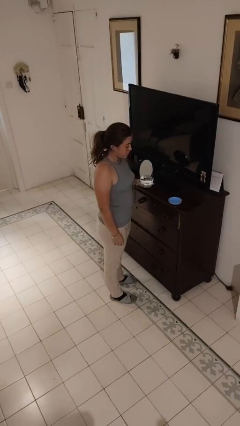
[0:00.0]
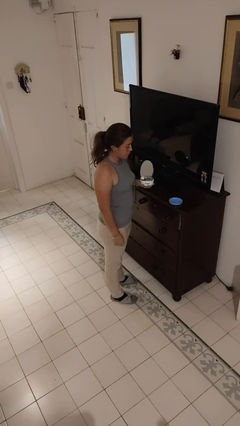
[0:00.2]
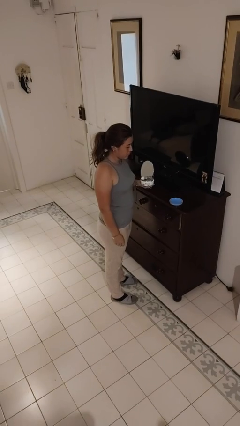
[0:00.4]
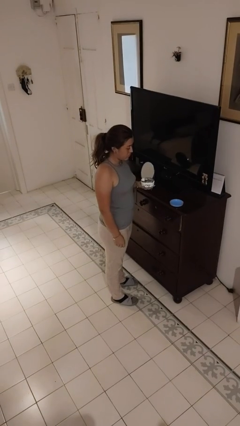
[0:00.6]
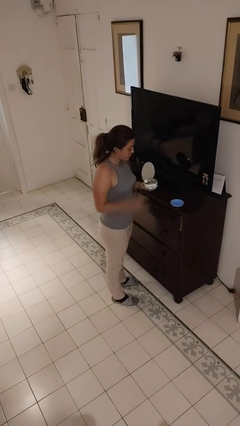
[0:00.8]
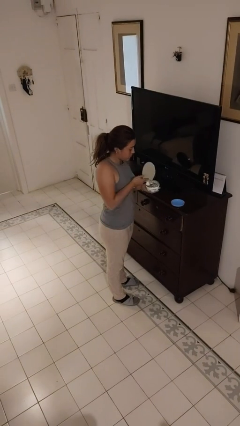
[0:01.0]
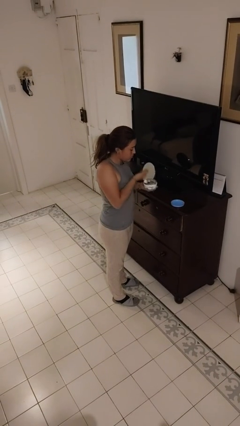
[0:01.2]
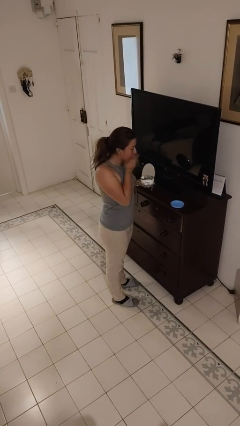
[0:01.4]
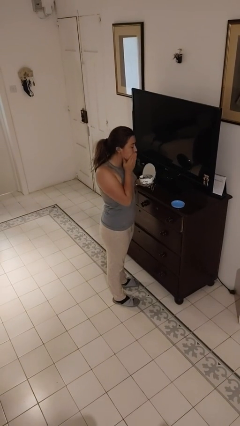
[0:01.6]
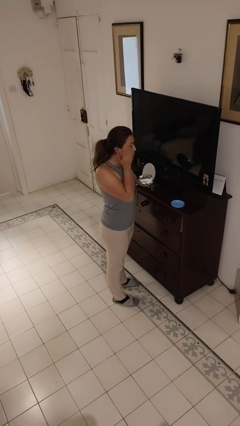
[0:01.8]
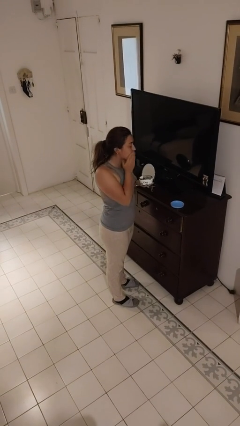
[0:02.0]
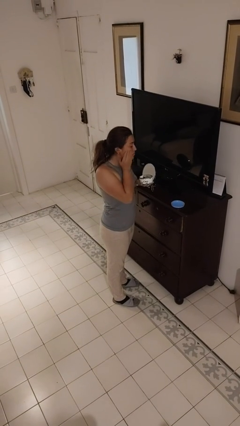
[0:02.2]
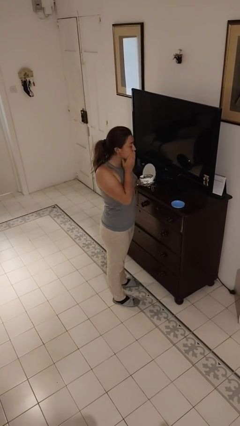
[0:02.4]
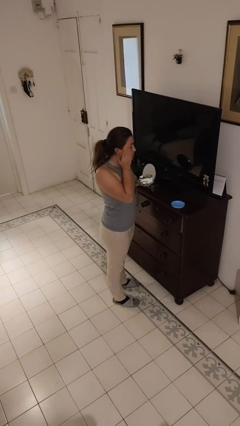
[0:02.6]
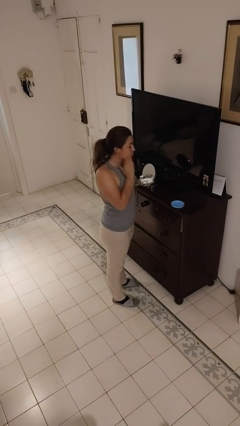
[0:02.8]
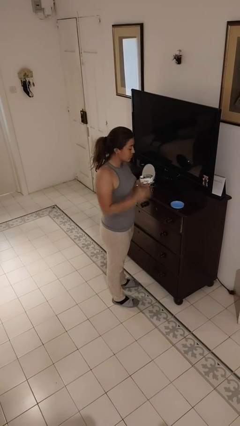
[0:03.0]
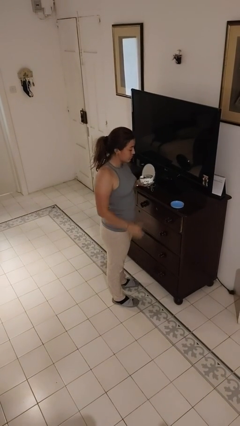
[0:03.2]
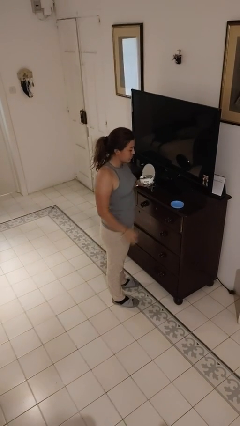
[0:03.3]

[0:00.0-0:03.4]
person applies facial moisturizer

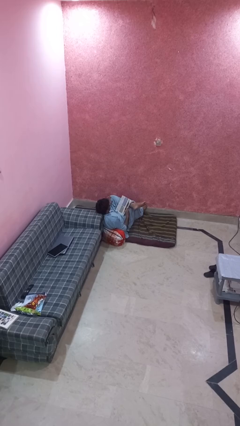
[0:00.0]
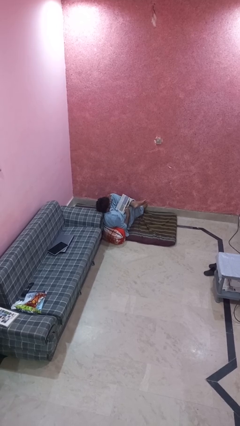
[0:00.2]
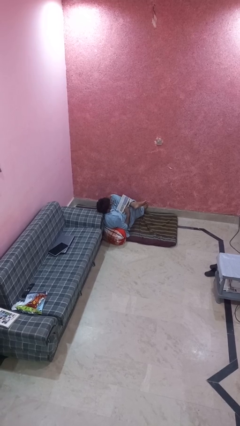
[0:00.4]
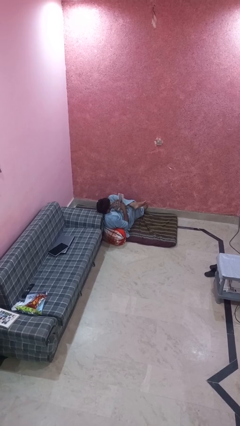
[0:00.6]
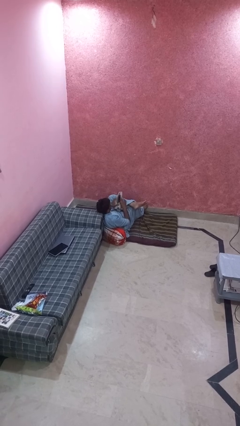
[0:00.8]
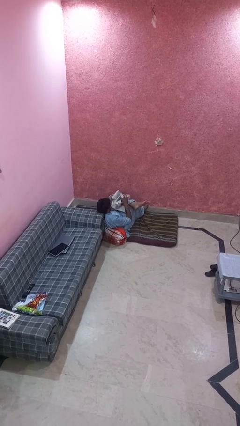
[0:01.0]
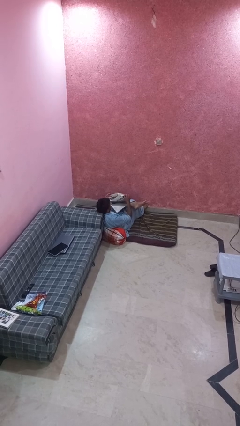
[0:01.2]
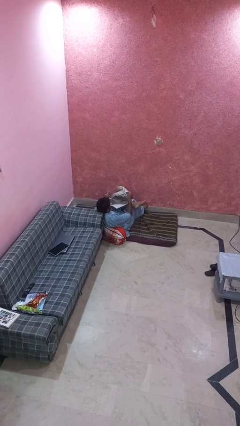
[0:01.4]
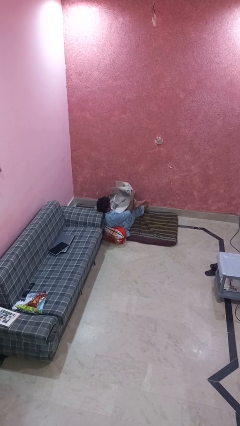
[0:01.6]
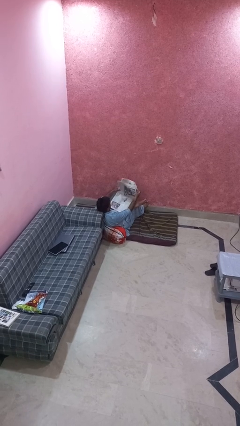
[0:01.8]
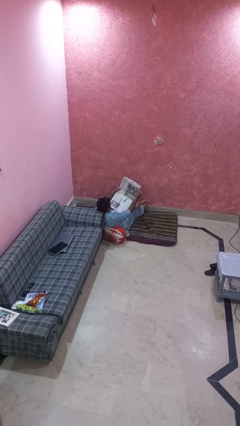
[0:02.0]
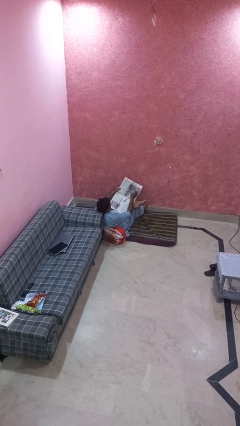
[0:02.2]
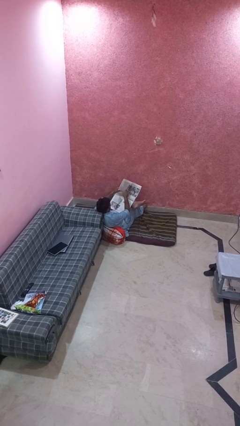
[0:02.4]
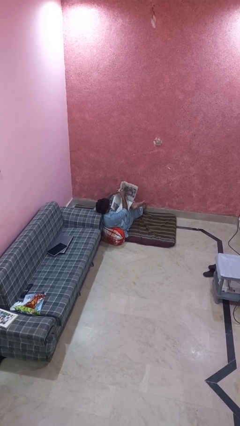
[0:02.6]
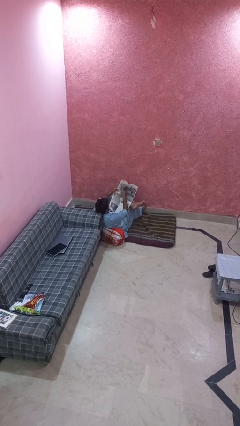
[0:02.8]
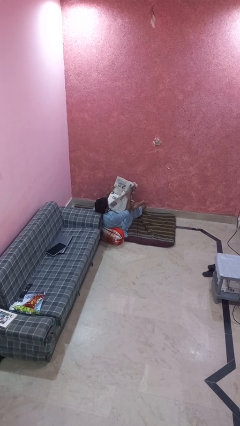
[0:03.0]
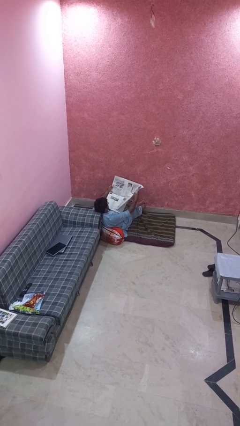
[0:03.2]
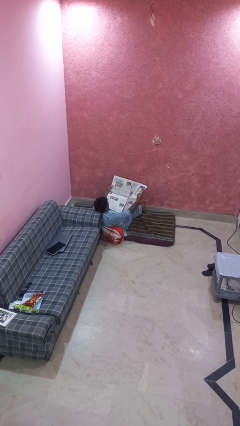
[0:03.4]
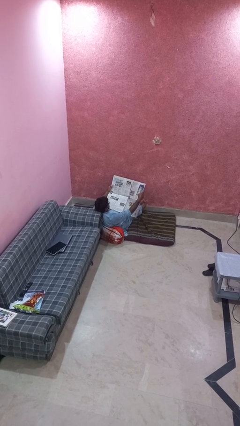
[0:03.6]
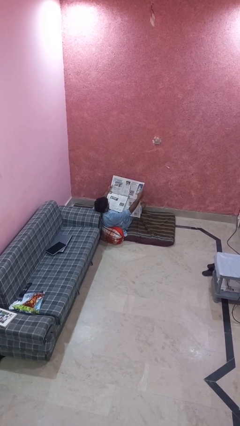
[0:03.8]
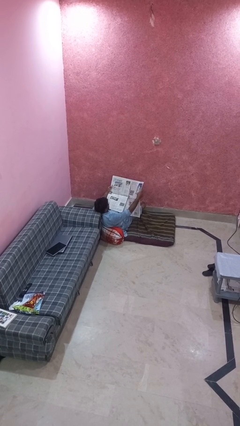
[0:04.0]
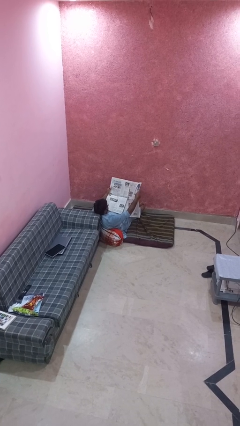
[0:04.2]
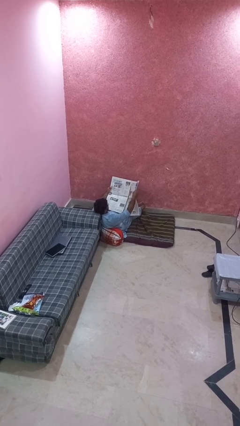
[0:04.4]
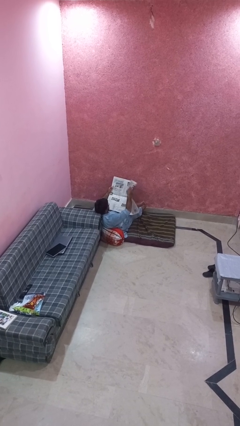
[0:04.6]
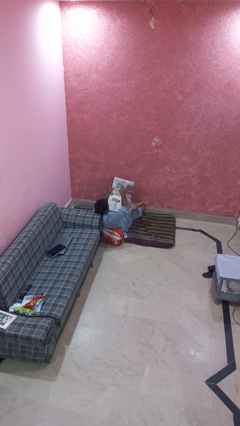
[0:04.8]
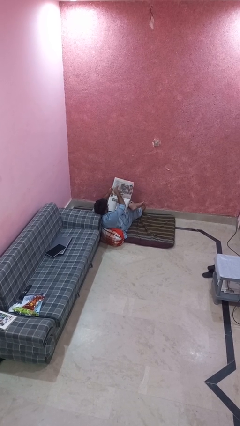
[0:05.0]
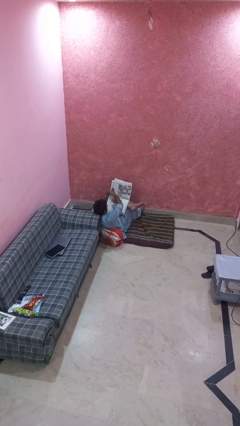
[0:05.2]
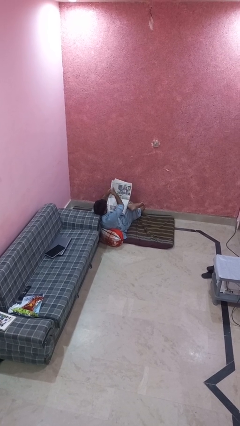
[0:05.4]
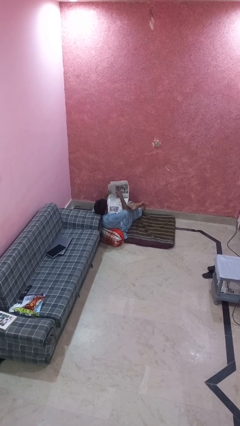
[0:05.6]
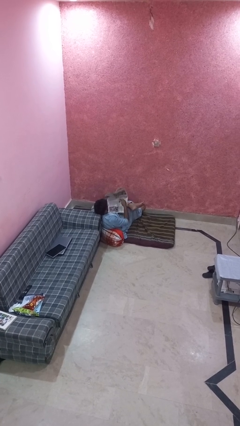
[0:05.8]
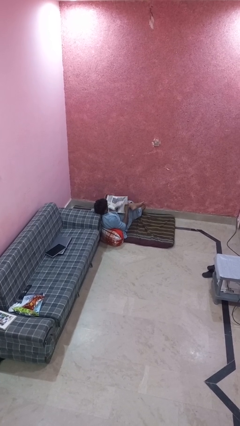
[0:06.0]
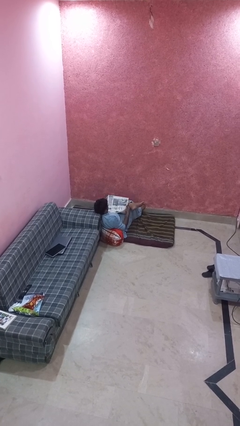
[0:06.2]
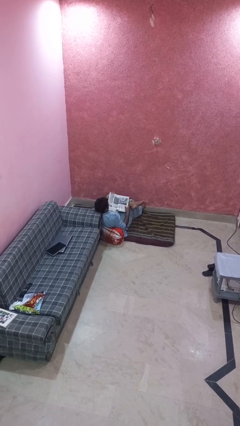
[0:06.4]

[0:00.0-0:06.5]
person reads newspaper

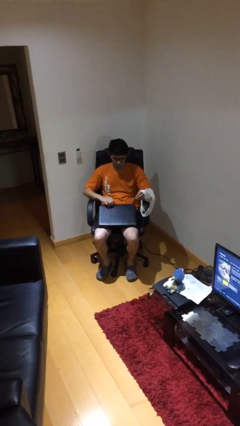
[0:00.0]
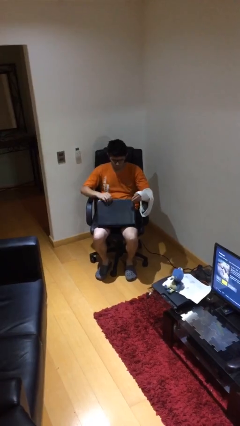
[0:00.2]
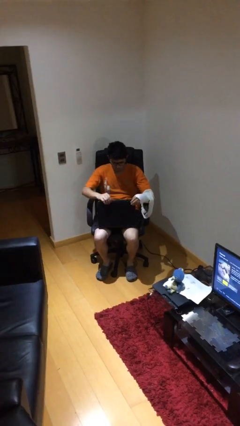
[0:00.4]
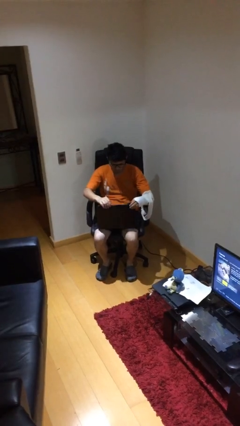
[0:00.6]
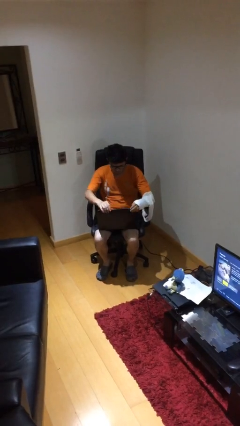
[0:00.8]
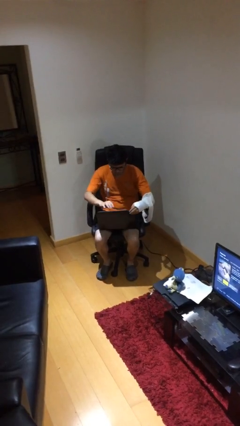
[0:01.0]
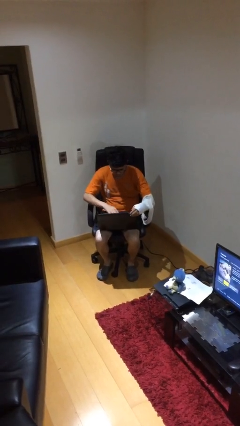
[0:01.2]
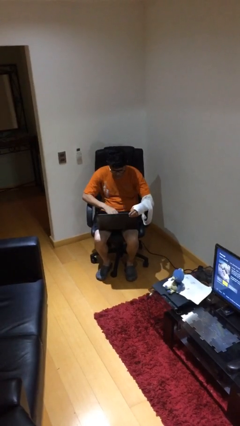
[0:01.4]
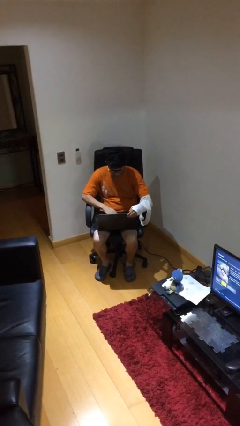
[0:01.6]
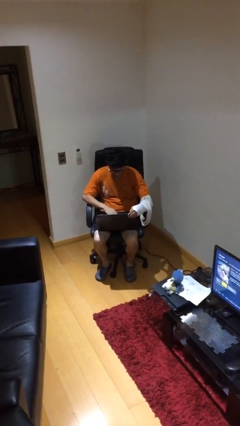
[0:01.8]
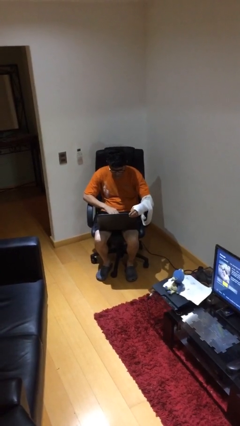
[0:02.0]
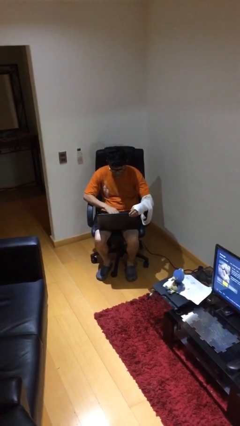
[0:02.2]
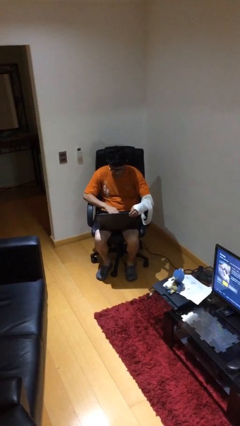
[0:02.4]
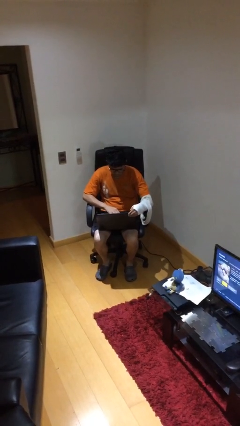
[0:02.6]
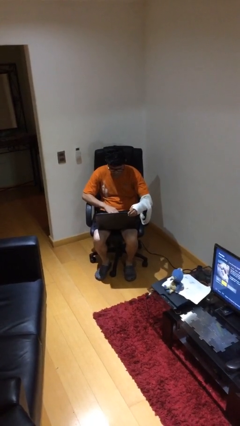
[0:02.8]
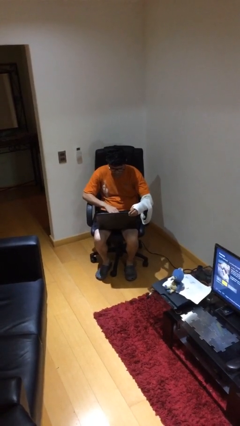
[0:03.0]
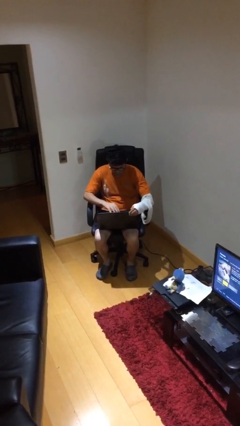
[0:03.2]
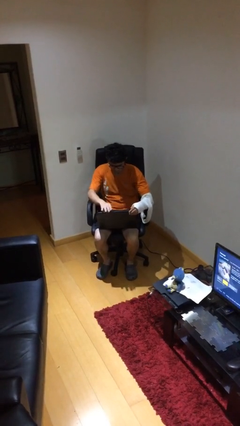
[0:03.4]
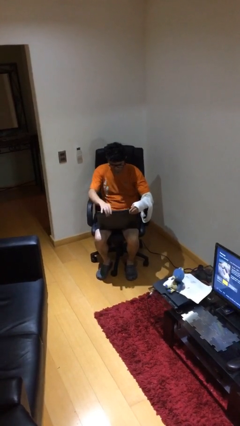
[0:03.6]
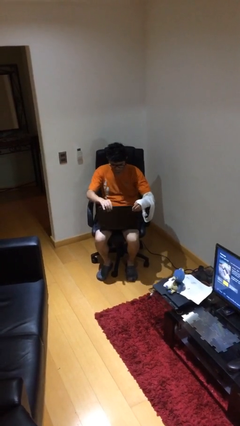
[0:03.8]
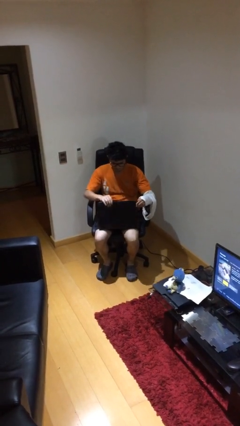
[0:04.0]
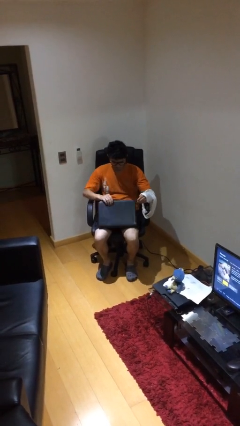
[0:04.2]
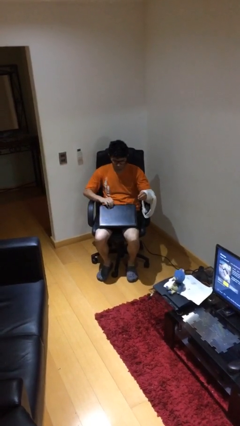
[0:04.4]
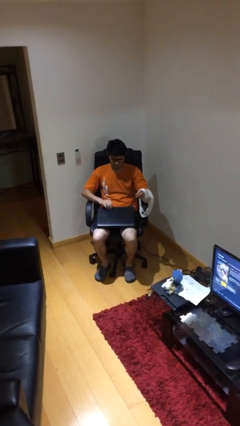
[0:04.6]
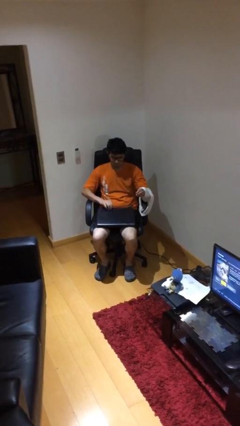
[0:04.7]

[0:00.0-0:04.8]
person interacts with laptop

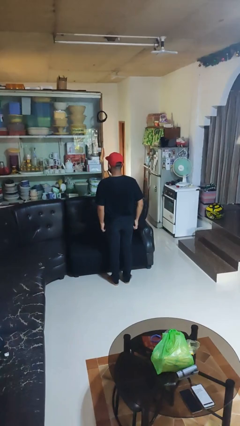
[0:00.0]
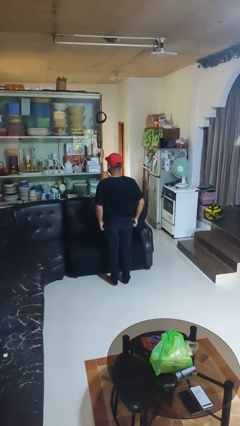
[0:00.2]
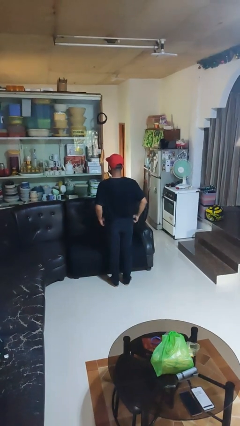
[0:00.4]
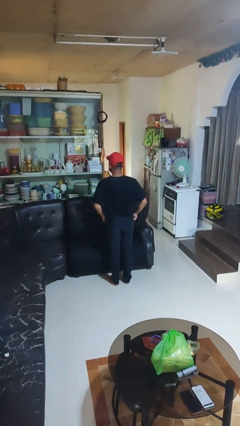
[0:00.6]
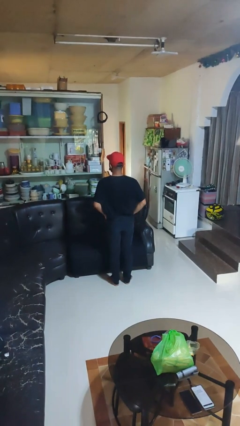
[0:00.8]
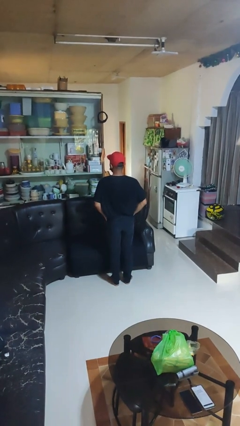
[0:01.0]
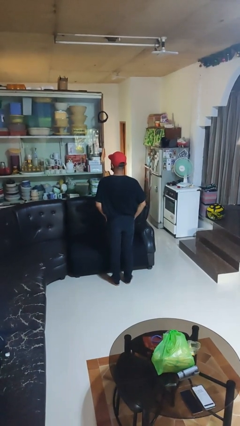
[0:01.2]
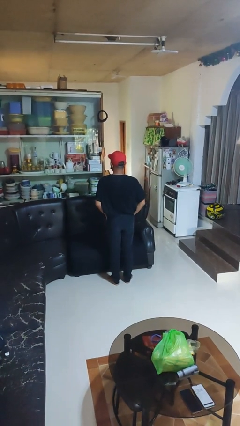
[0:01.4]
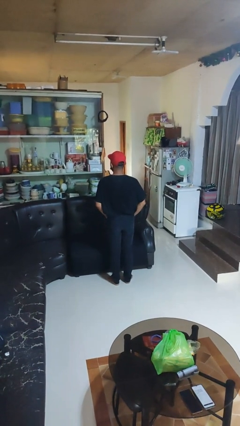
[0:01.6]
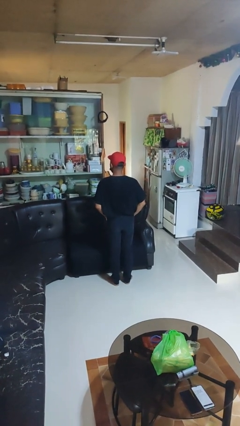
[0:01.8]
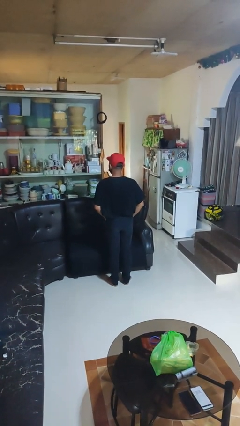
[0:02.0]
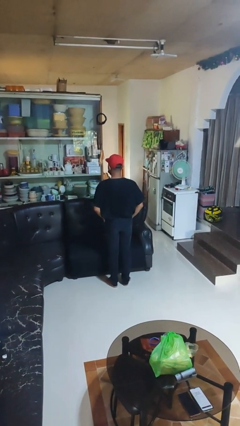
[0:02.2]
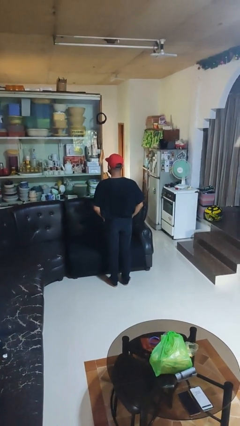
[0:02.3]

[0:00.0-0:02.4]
person puts hands in back pockets

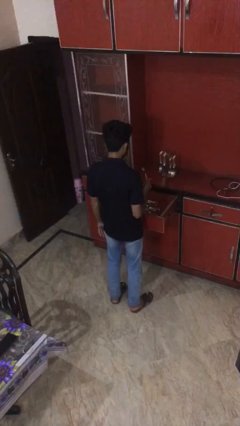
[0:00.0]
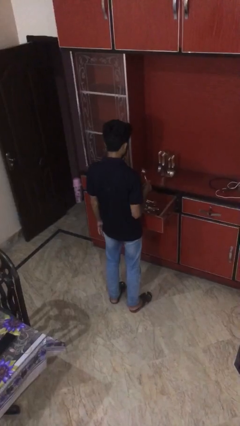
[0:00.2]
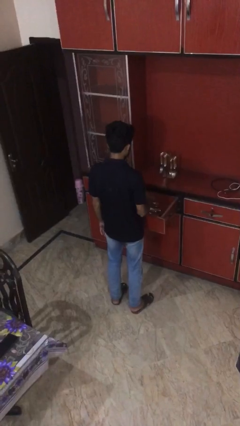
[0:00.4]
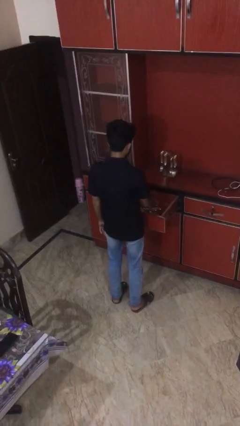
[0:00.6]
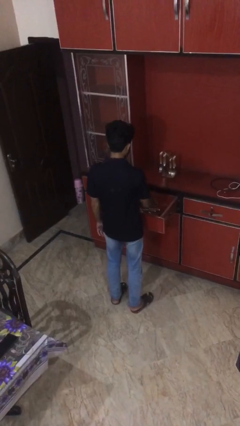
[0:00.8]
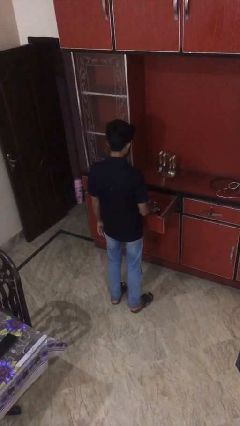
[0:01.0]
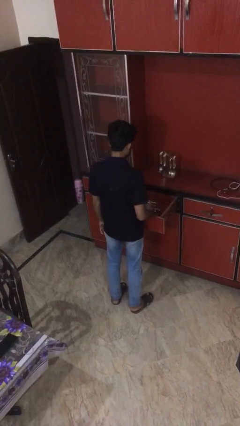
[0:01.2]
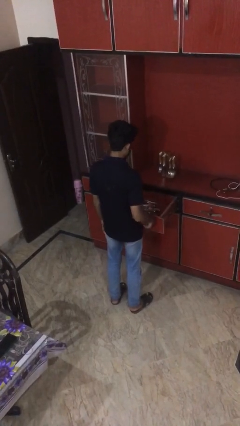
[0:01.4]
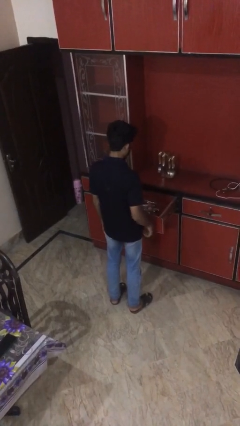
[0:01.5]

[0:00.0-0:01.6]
person puts object into kitchen drawer
